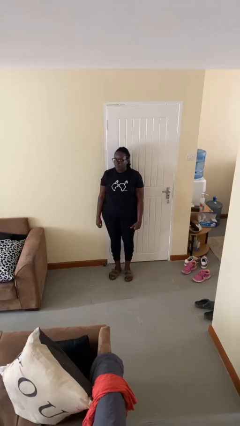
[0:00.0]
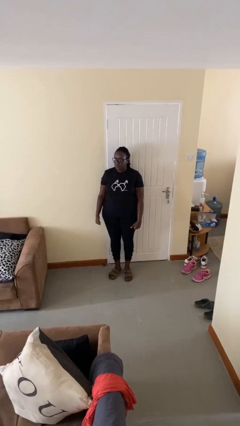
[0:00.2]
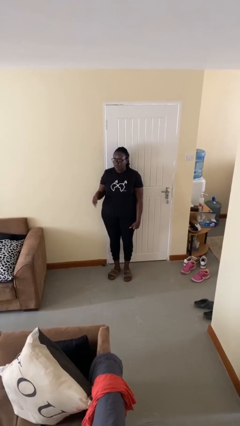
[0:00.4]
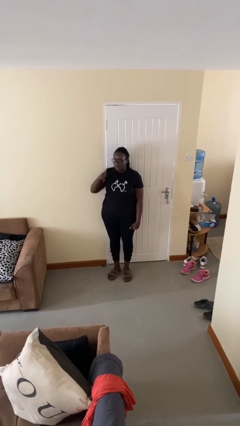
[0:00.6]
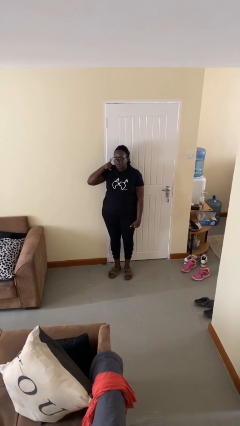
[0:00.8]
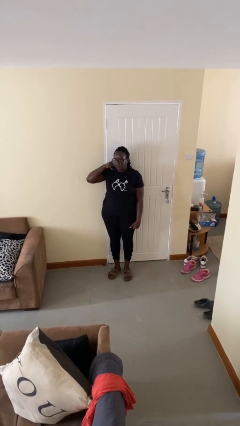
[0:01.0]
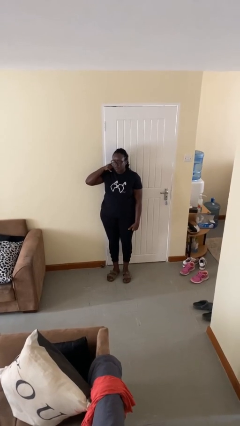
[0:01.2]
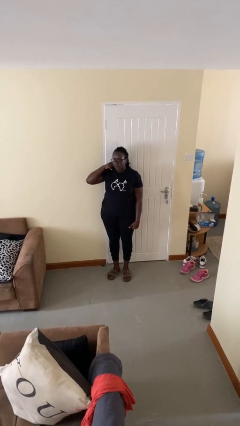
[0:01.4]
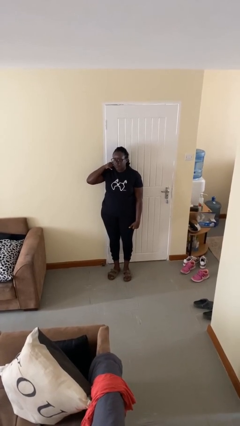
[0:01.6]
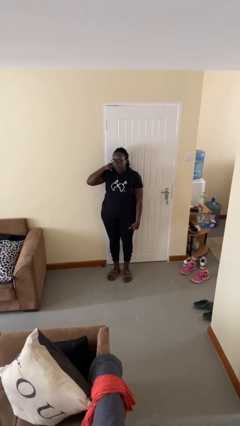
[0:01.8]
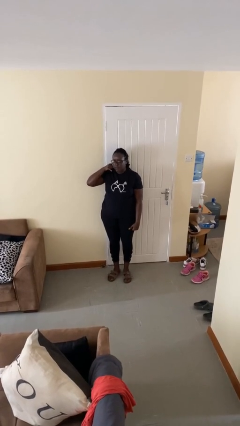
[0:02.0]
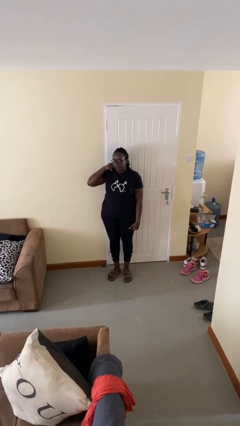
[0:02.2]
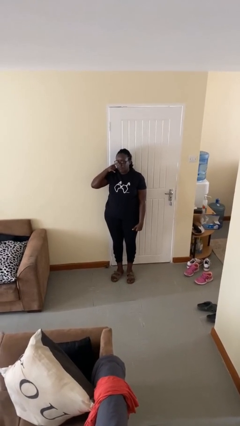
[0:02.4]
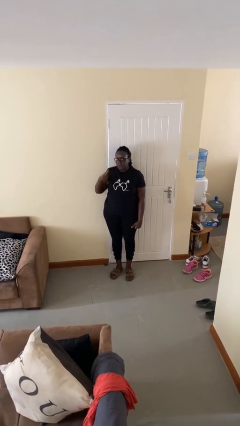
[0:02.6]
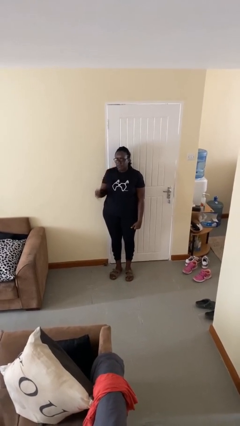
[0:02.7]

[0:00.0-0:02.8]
person gestures call me

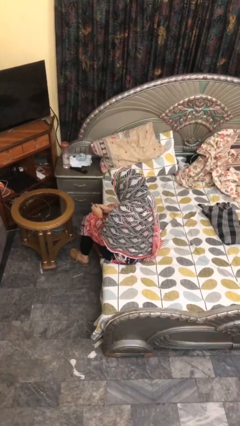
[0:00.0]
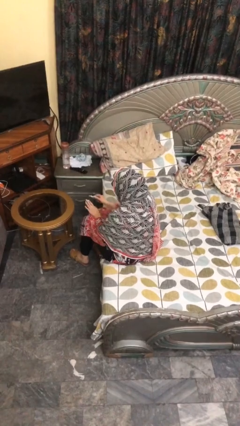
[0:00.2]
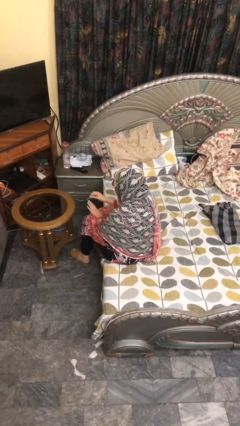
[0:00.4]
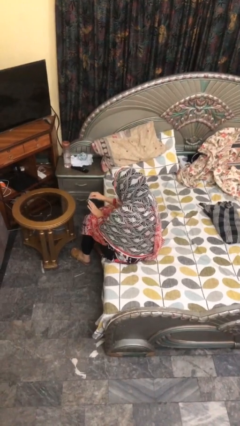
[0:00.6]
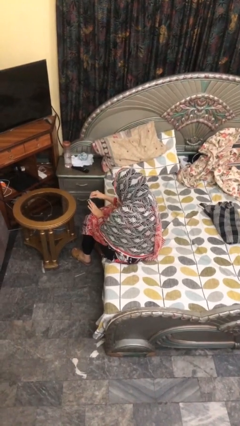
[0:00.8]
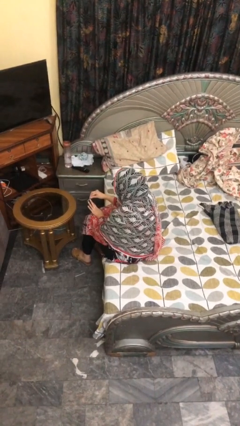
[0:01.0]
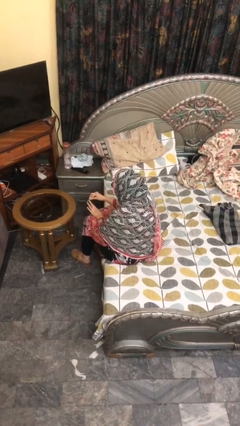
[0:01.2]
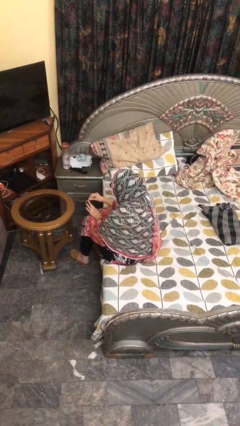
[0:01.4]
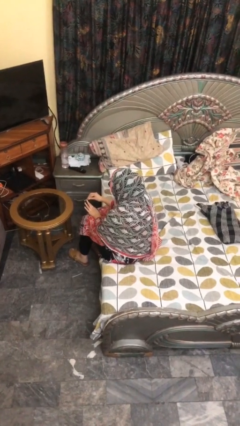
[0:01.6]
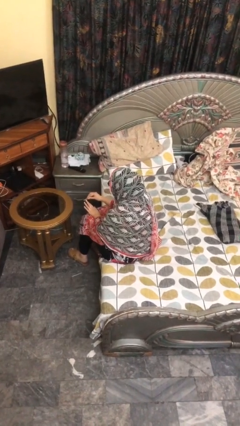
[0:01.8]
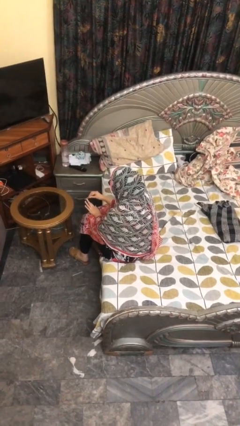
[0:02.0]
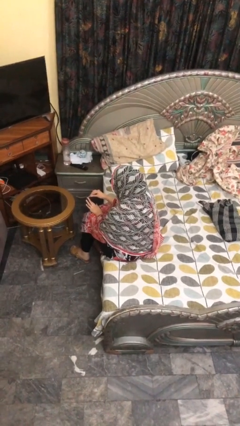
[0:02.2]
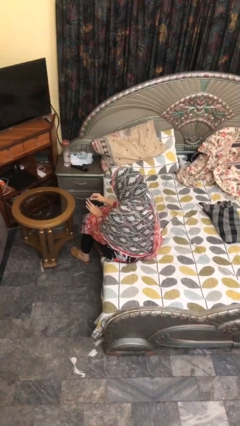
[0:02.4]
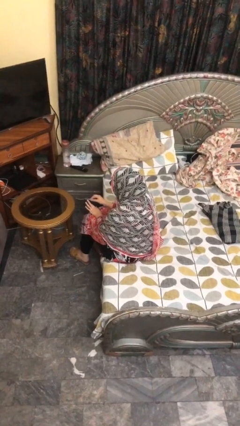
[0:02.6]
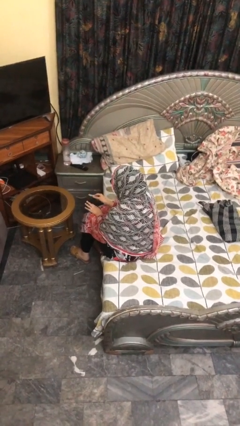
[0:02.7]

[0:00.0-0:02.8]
person files fingernails

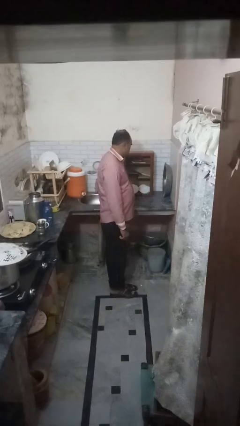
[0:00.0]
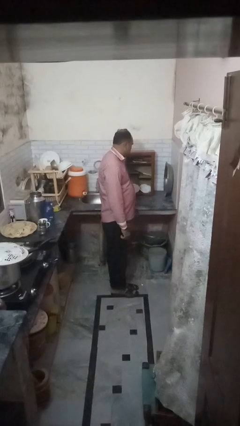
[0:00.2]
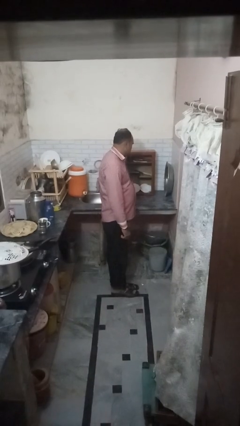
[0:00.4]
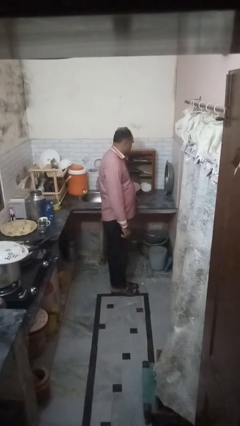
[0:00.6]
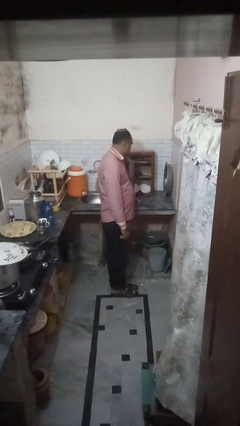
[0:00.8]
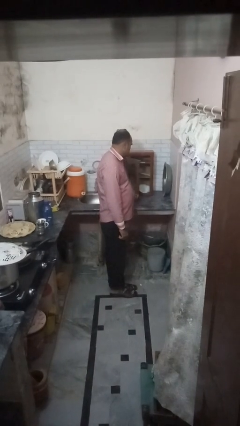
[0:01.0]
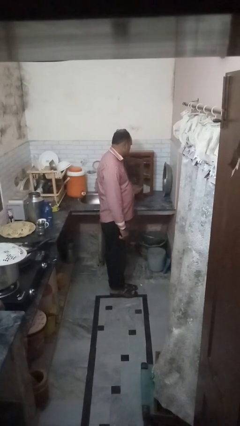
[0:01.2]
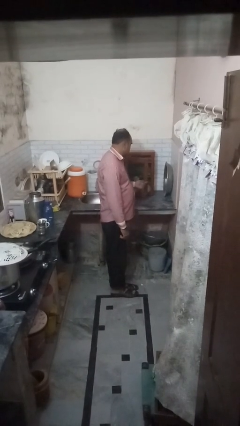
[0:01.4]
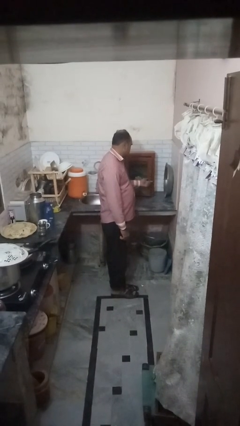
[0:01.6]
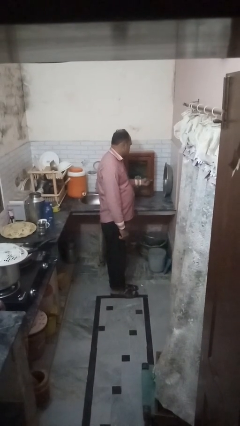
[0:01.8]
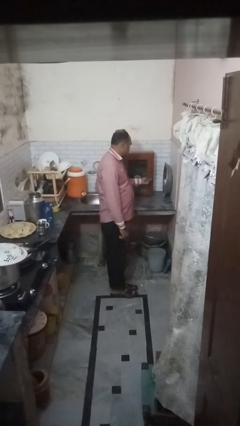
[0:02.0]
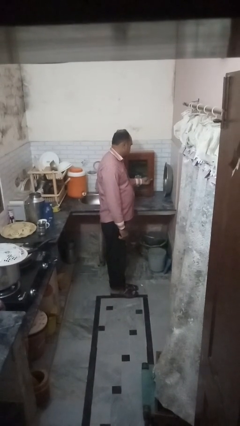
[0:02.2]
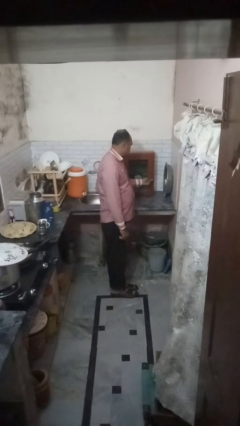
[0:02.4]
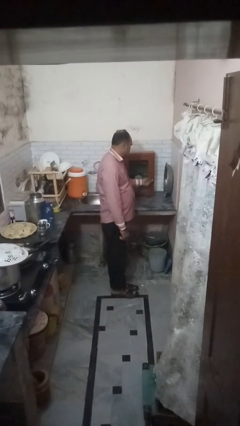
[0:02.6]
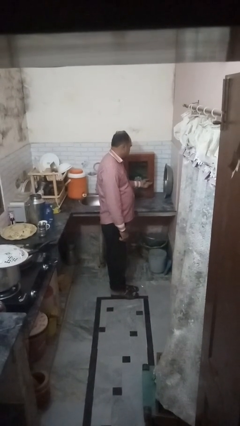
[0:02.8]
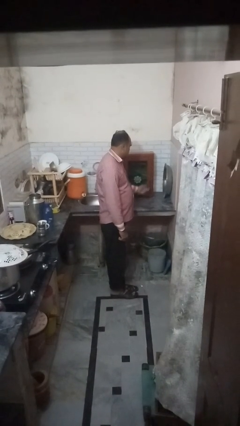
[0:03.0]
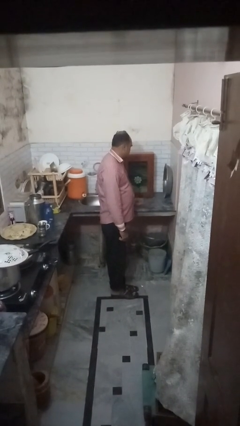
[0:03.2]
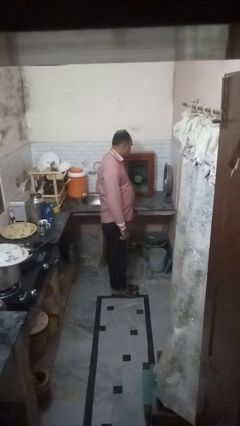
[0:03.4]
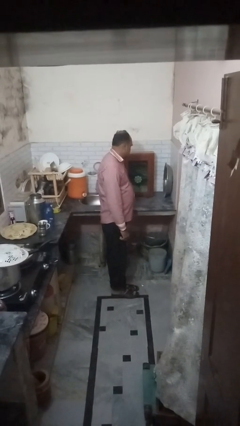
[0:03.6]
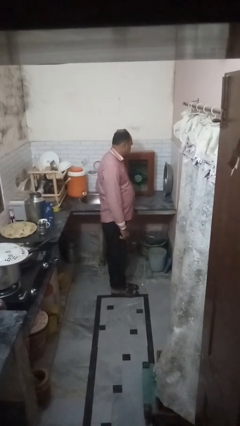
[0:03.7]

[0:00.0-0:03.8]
person closes cabinet

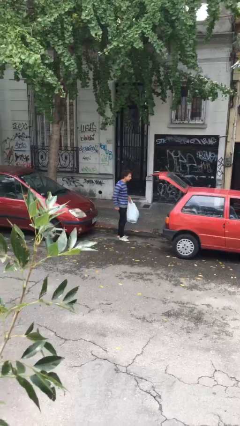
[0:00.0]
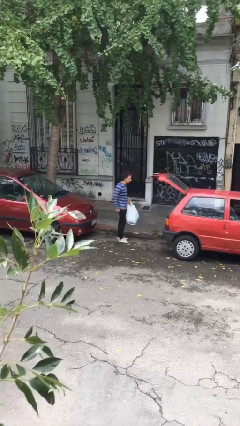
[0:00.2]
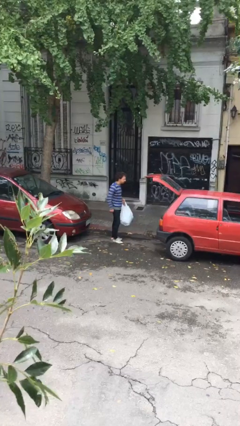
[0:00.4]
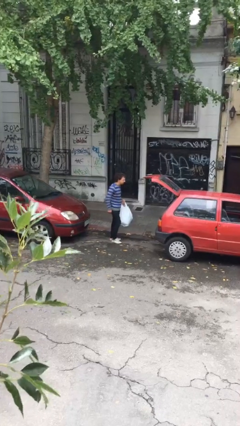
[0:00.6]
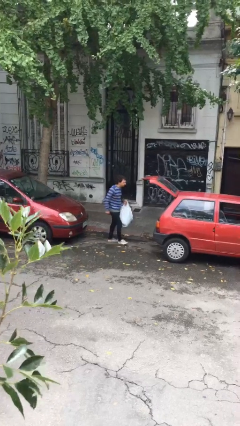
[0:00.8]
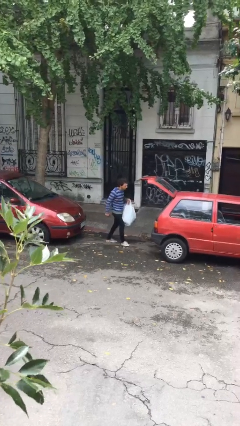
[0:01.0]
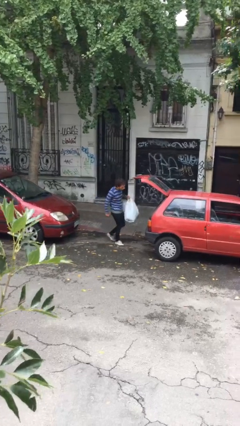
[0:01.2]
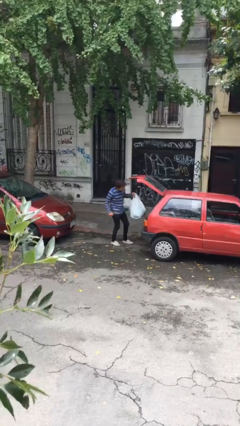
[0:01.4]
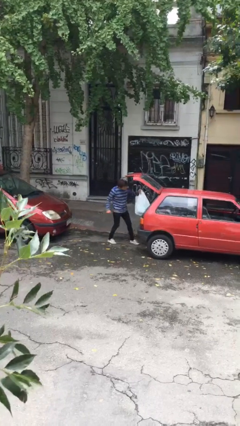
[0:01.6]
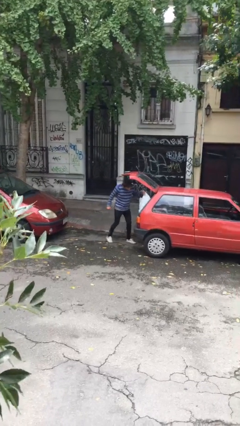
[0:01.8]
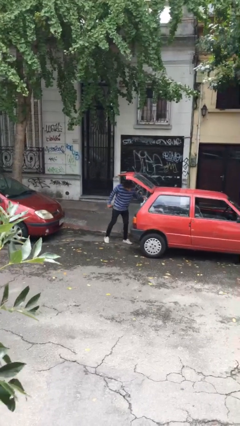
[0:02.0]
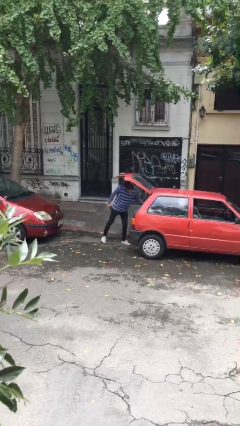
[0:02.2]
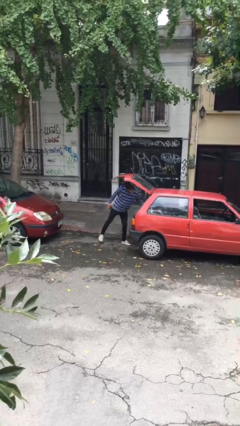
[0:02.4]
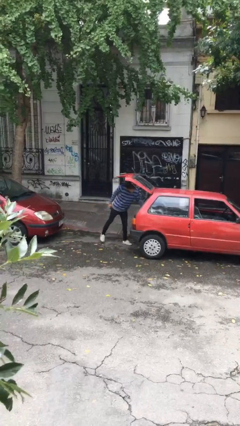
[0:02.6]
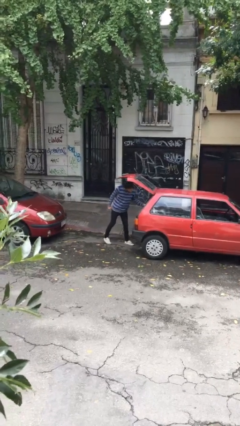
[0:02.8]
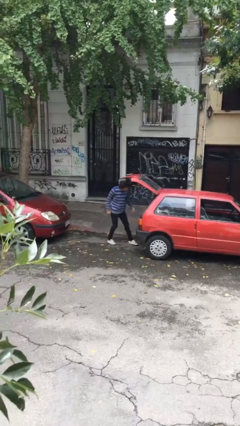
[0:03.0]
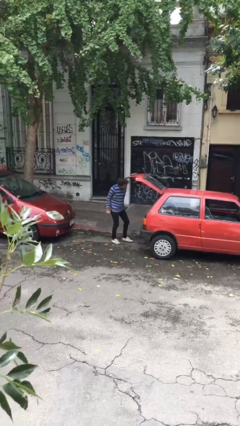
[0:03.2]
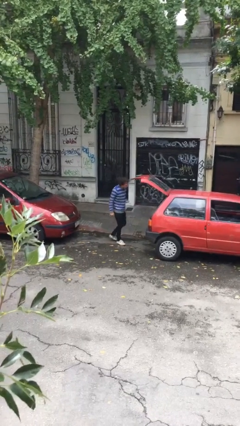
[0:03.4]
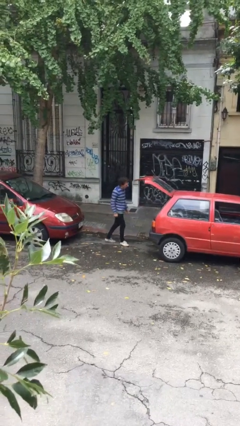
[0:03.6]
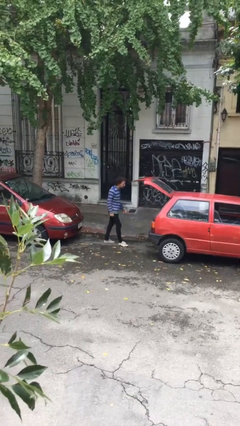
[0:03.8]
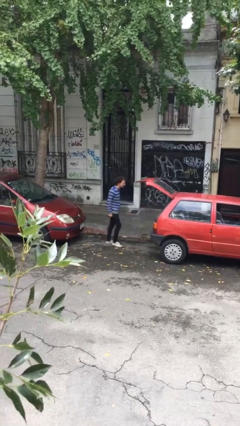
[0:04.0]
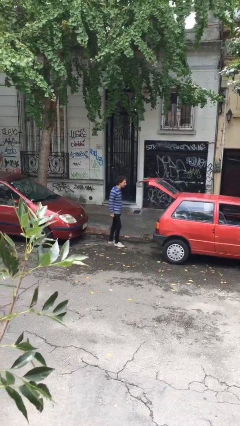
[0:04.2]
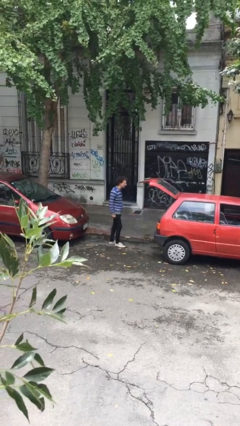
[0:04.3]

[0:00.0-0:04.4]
person loads car

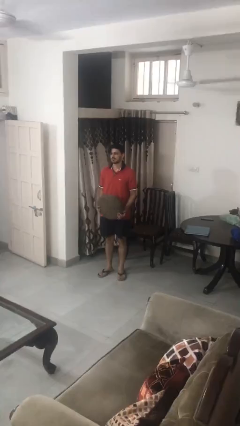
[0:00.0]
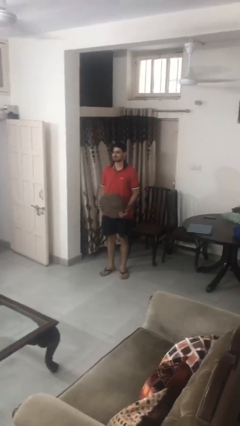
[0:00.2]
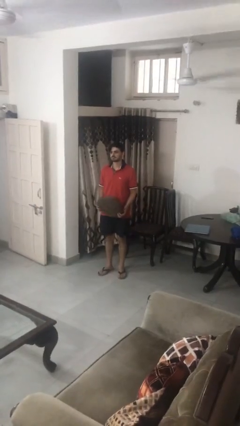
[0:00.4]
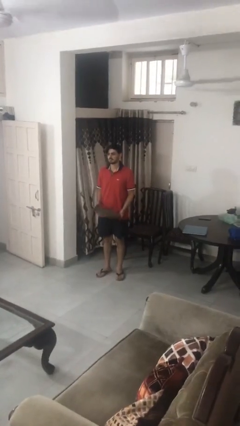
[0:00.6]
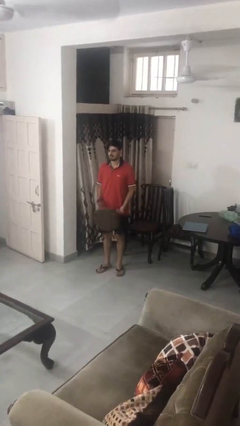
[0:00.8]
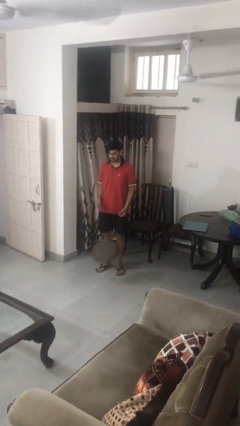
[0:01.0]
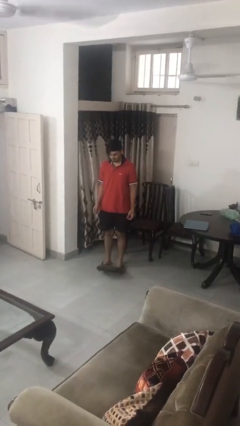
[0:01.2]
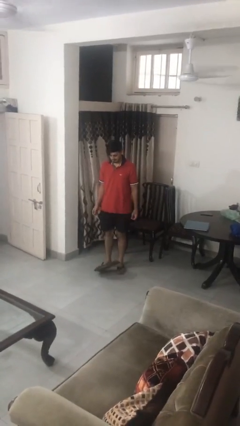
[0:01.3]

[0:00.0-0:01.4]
person drops object

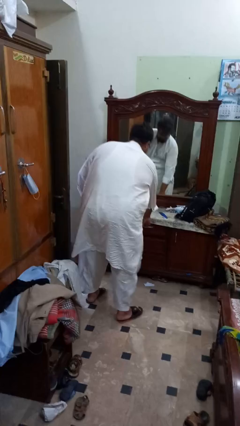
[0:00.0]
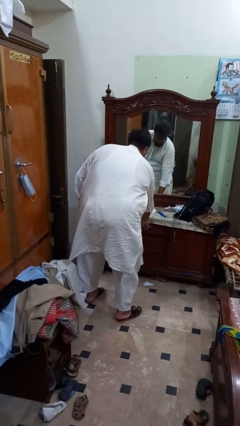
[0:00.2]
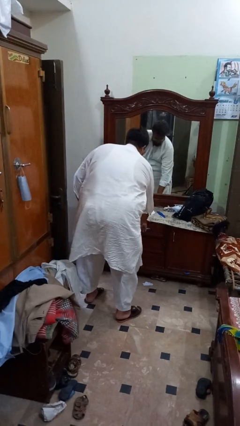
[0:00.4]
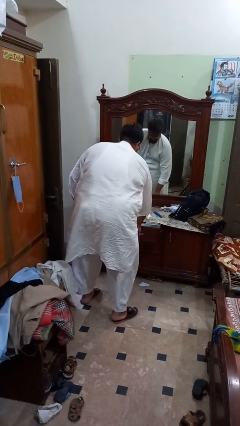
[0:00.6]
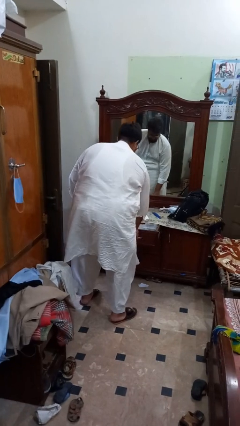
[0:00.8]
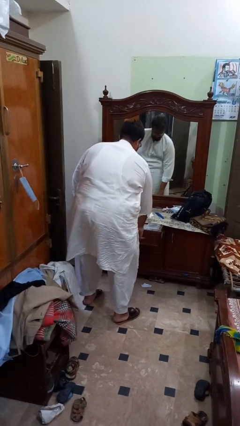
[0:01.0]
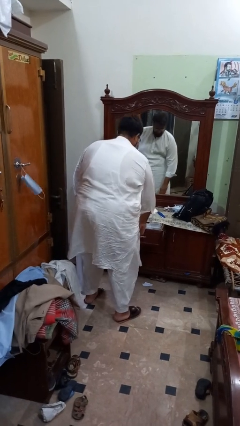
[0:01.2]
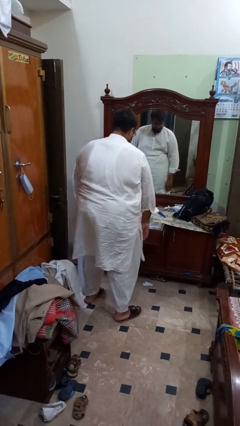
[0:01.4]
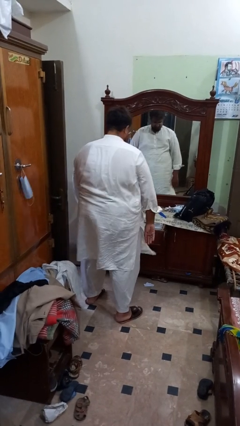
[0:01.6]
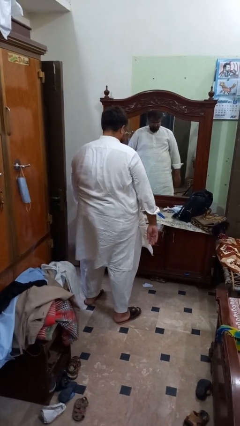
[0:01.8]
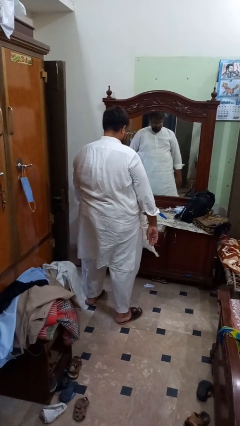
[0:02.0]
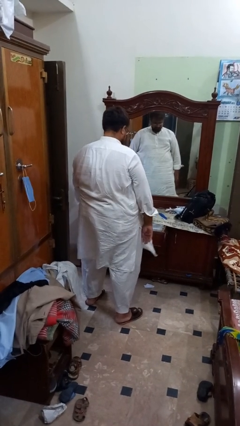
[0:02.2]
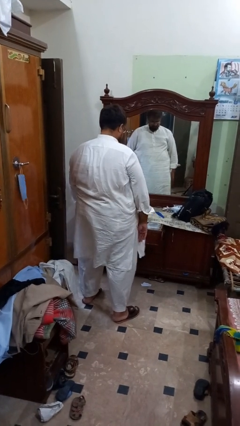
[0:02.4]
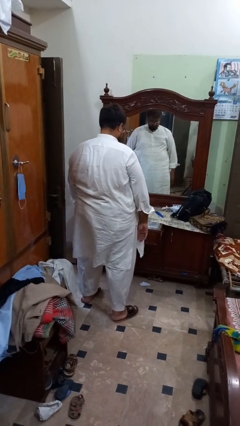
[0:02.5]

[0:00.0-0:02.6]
person opens dresser drawer
